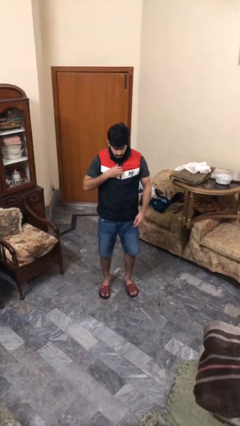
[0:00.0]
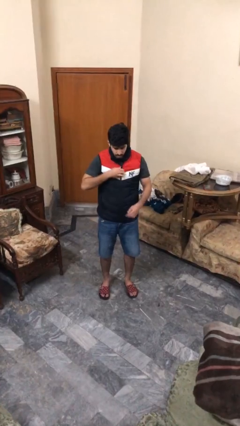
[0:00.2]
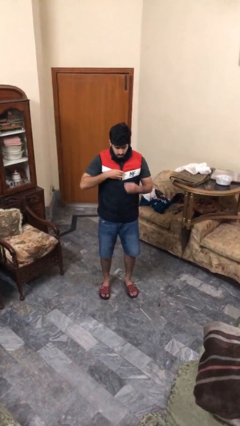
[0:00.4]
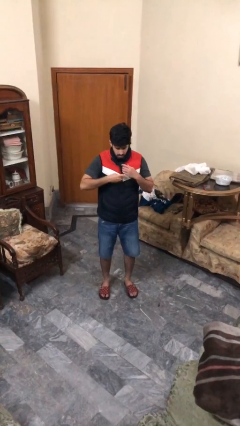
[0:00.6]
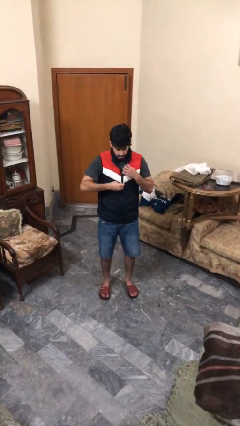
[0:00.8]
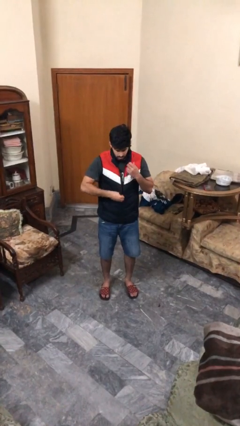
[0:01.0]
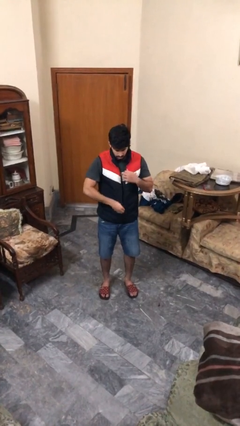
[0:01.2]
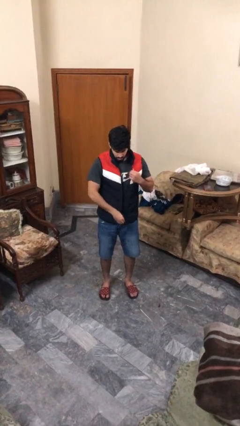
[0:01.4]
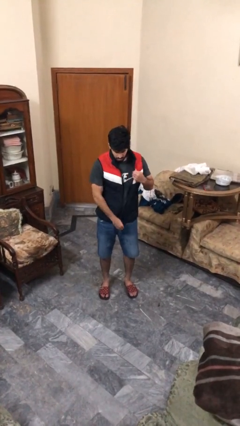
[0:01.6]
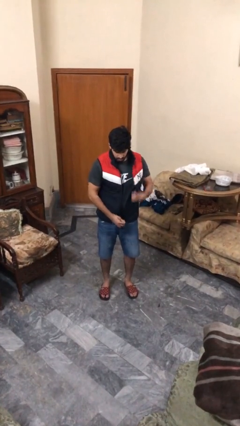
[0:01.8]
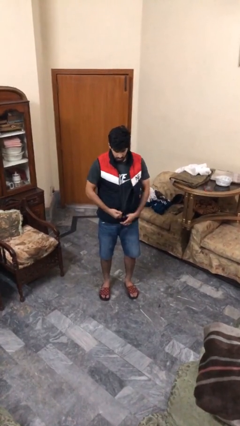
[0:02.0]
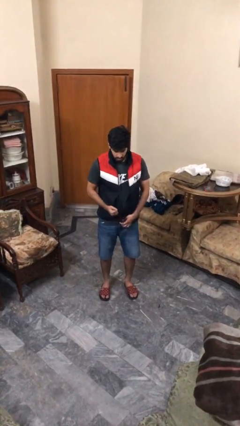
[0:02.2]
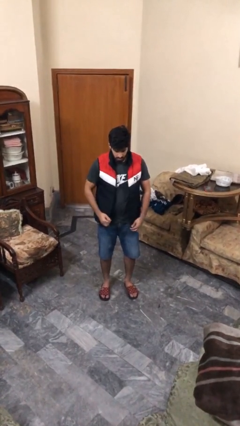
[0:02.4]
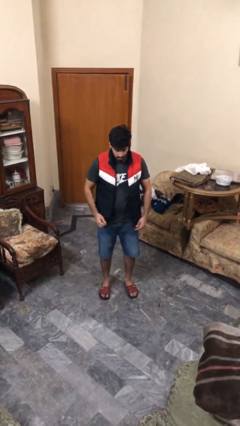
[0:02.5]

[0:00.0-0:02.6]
person unzips jacket

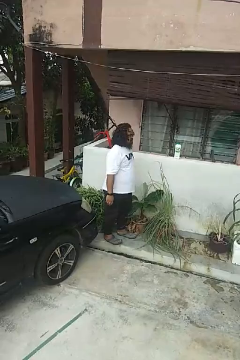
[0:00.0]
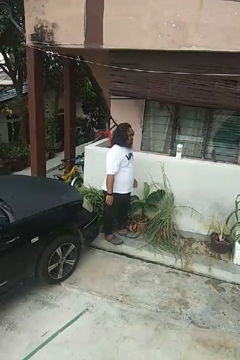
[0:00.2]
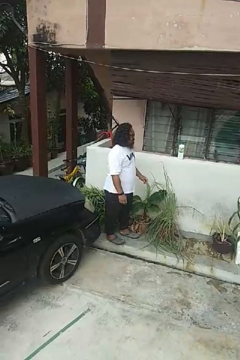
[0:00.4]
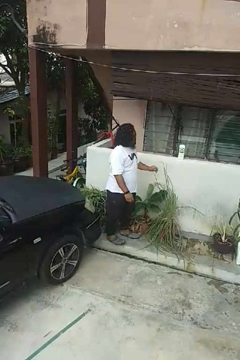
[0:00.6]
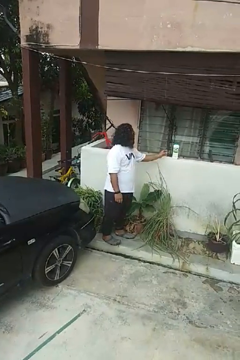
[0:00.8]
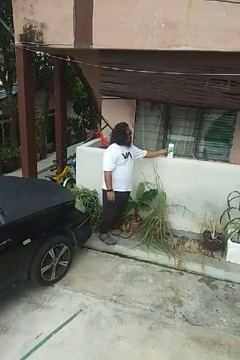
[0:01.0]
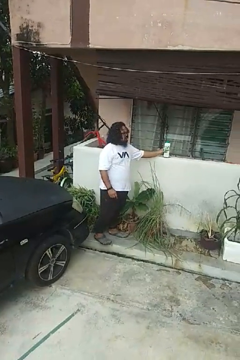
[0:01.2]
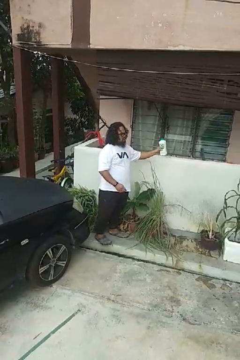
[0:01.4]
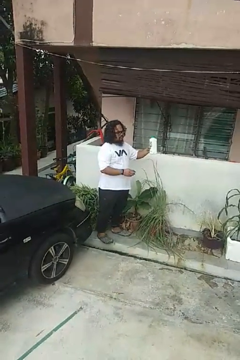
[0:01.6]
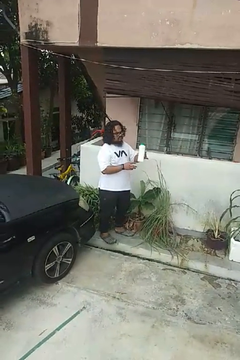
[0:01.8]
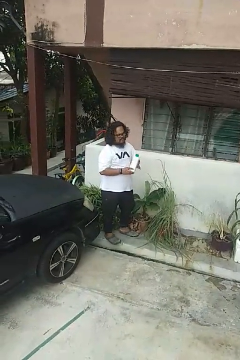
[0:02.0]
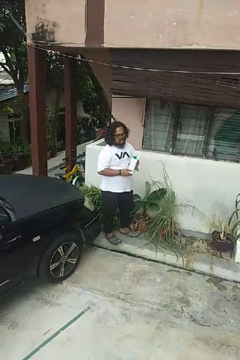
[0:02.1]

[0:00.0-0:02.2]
person picks up object from countertop

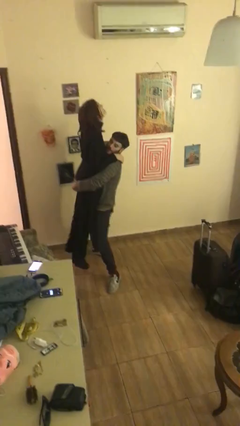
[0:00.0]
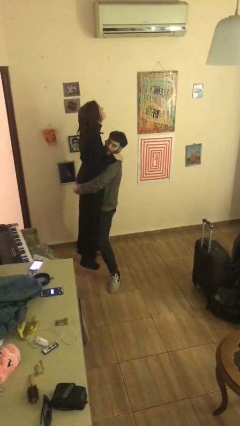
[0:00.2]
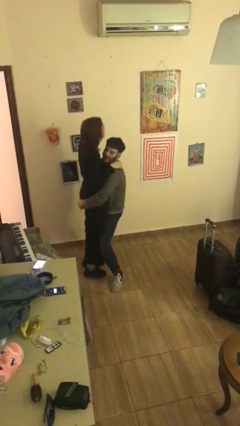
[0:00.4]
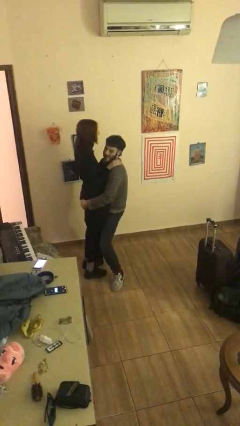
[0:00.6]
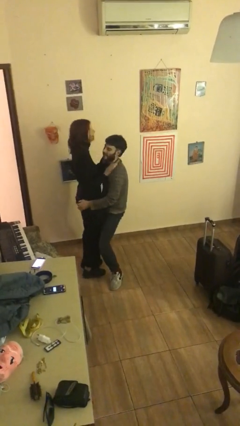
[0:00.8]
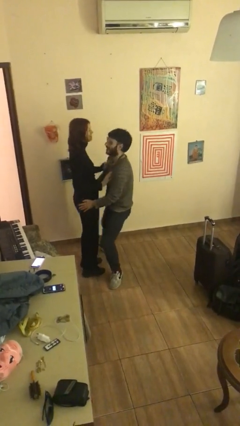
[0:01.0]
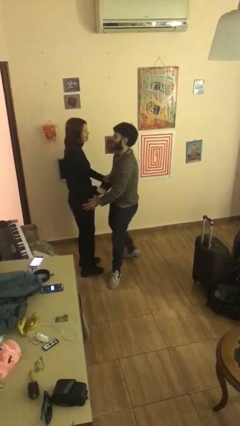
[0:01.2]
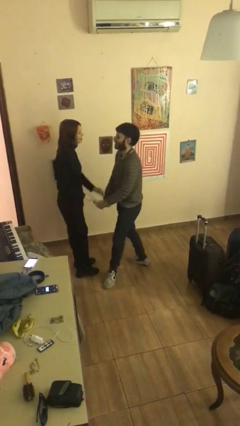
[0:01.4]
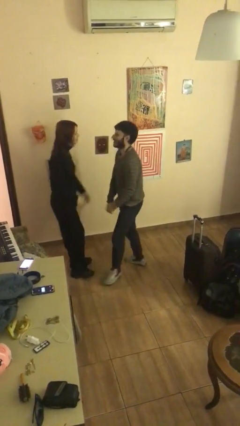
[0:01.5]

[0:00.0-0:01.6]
person puts down person

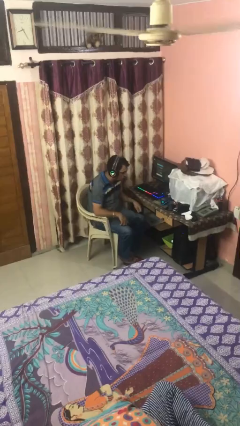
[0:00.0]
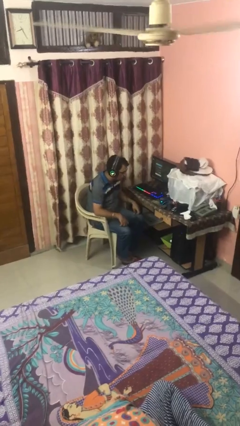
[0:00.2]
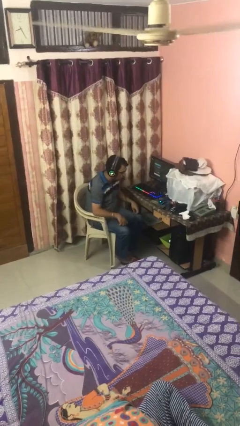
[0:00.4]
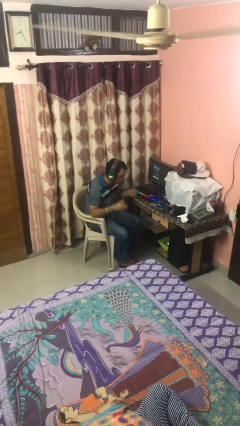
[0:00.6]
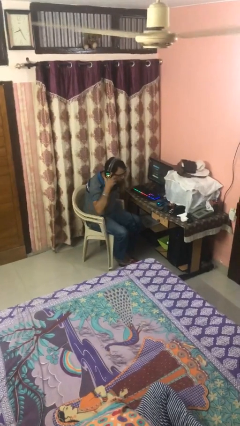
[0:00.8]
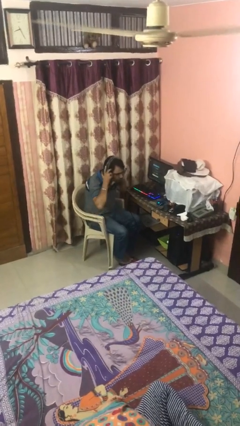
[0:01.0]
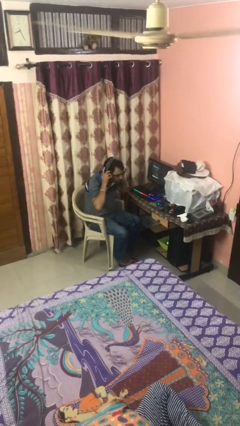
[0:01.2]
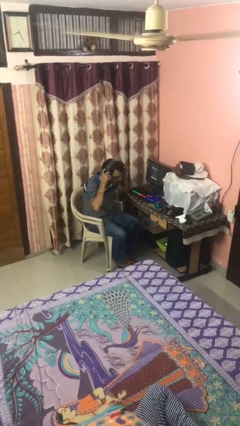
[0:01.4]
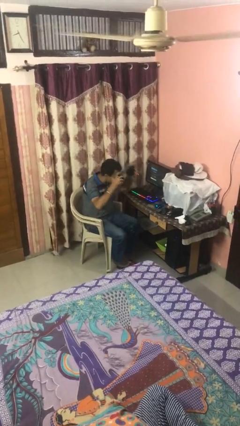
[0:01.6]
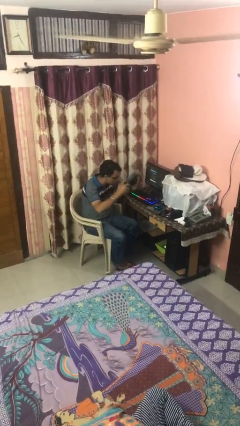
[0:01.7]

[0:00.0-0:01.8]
person takes off headphones

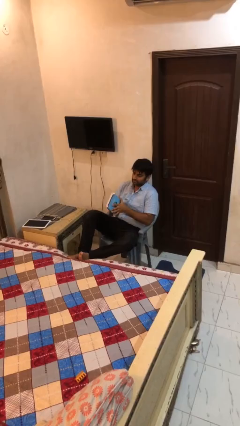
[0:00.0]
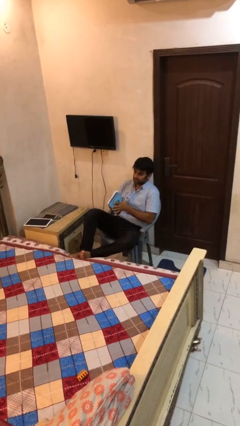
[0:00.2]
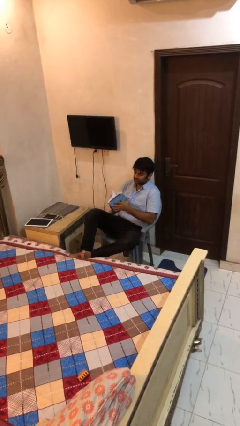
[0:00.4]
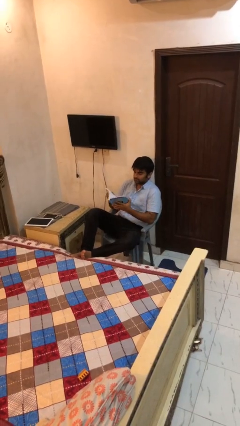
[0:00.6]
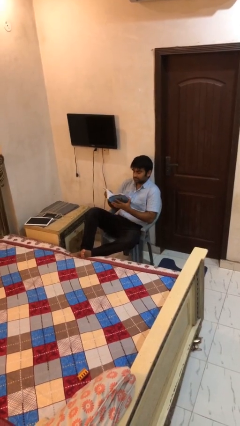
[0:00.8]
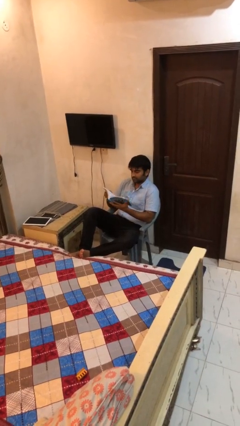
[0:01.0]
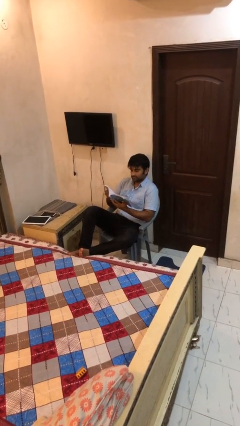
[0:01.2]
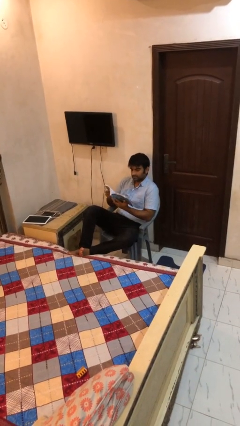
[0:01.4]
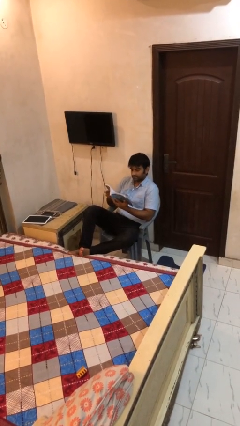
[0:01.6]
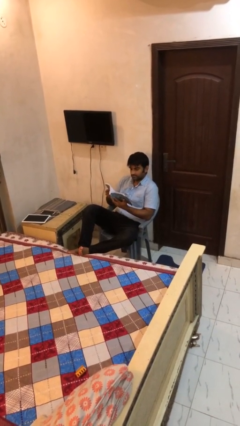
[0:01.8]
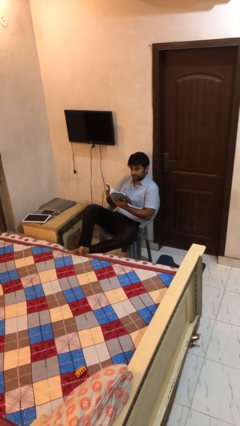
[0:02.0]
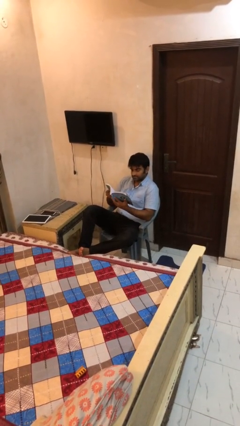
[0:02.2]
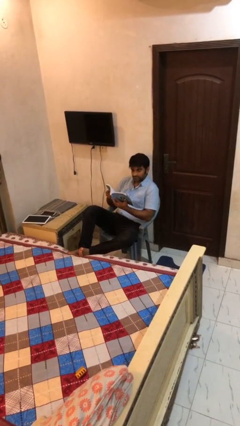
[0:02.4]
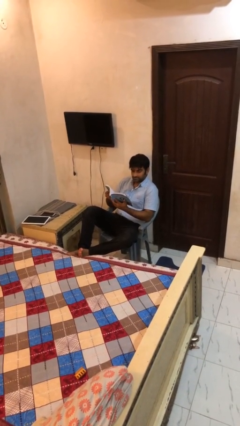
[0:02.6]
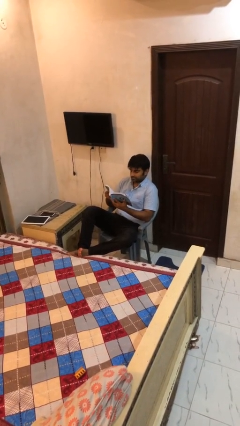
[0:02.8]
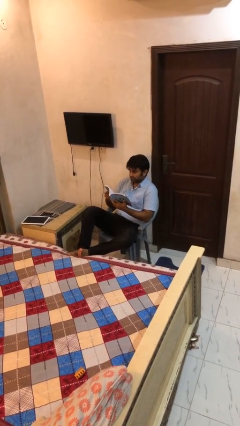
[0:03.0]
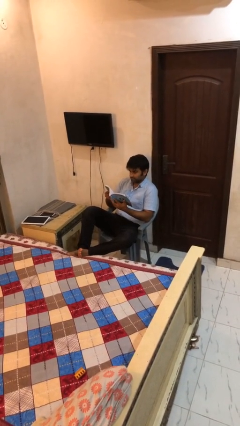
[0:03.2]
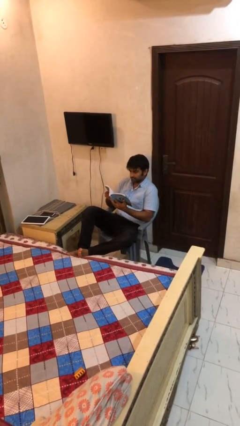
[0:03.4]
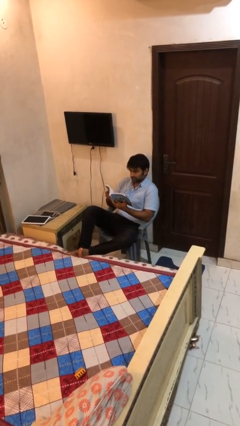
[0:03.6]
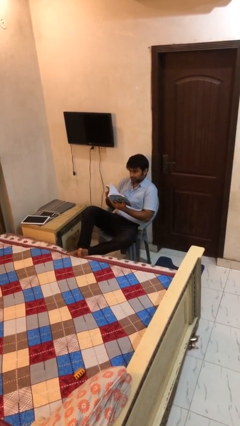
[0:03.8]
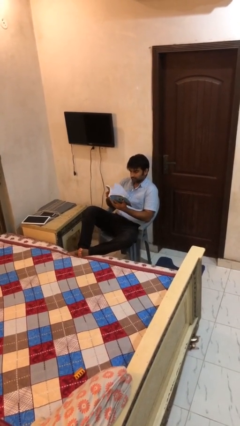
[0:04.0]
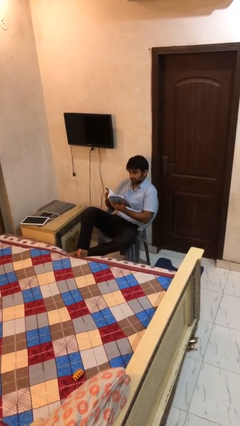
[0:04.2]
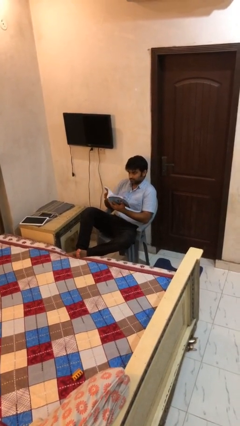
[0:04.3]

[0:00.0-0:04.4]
person reads document

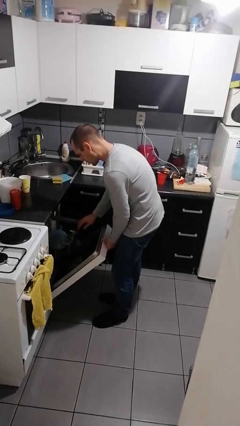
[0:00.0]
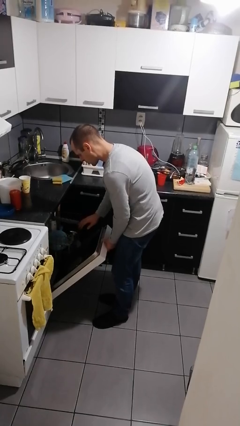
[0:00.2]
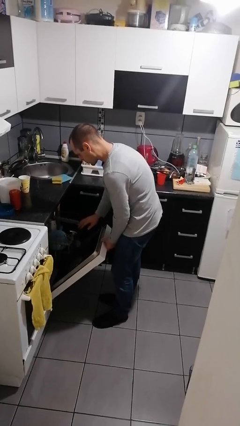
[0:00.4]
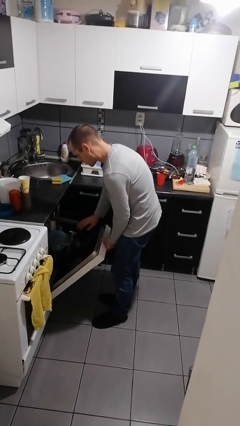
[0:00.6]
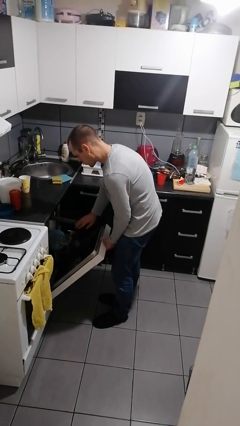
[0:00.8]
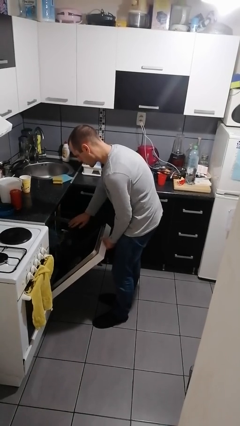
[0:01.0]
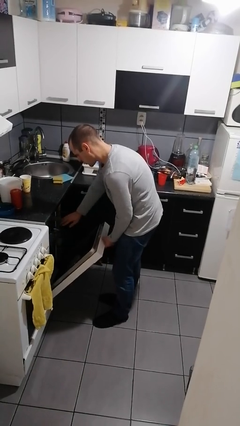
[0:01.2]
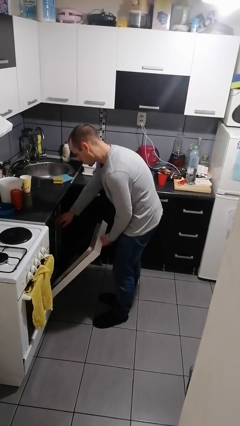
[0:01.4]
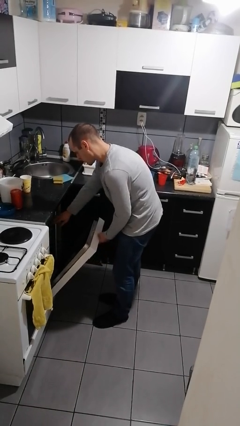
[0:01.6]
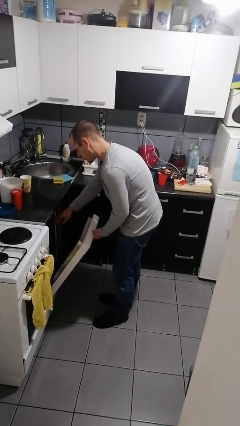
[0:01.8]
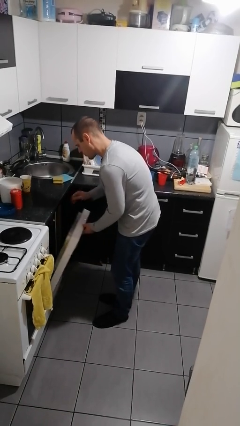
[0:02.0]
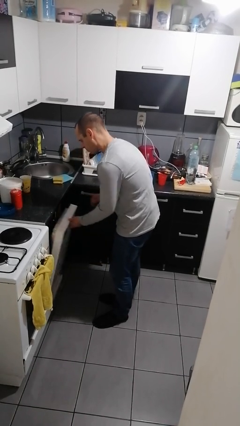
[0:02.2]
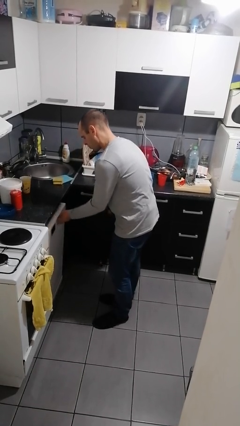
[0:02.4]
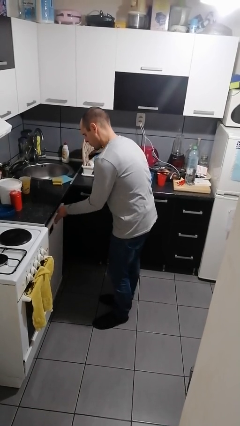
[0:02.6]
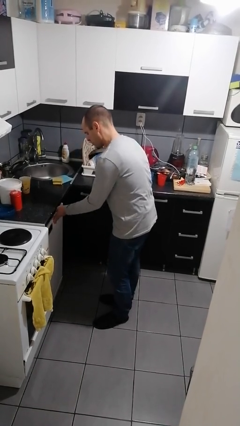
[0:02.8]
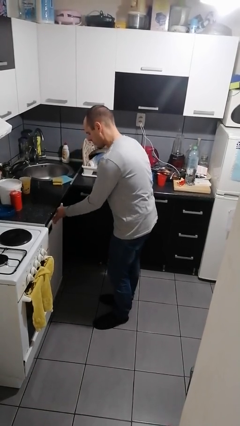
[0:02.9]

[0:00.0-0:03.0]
person closes dishwasher

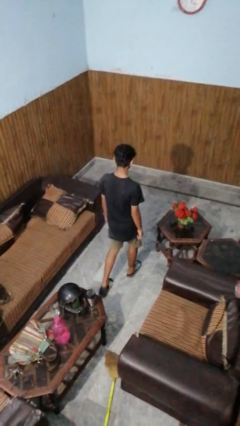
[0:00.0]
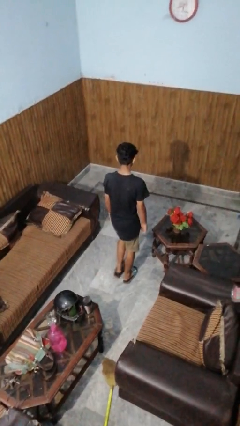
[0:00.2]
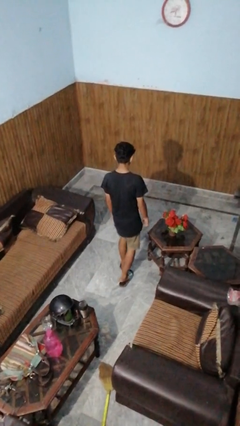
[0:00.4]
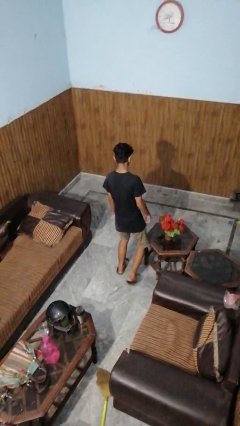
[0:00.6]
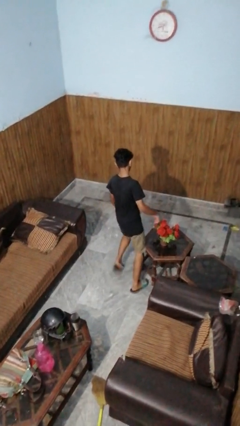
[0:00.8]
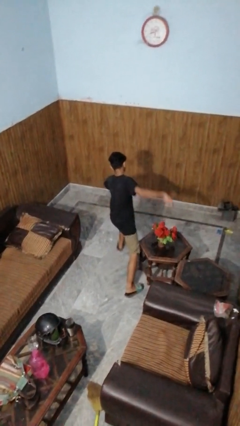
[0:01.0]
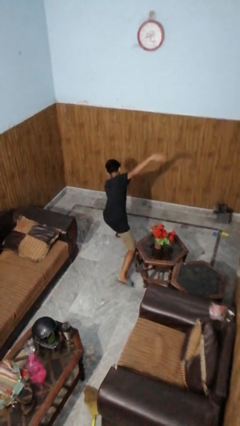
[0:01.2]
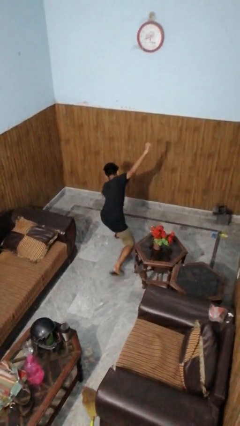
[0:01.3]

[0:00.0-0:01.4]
person trips on object on floor

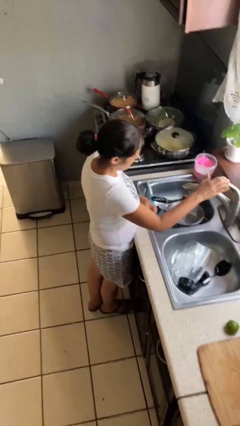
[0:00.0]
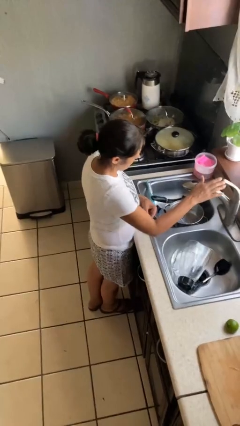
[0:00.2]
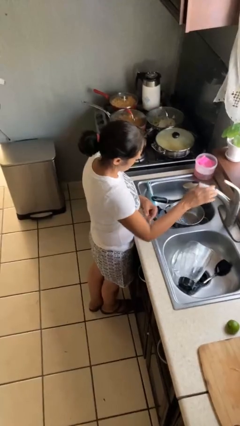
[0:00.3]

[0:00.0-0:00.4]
person turns off faucet
